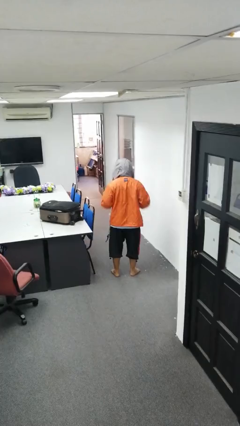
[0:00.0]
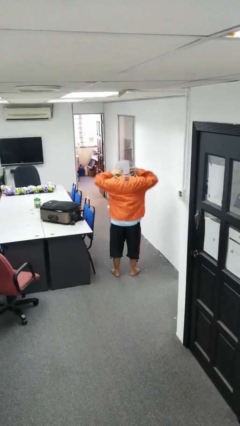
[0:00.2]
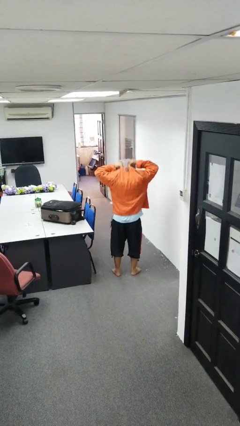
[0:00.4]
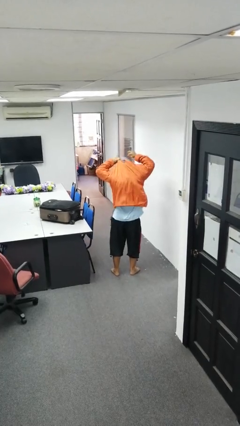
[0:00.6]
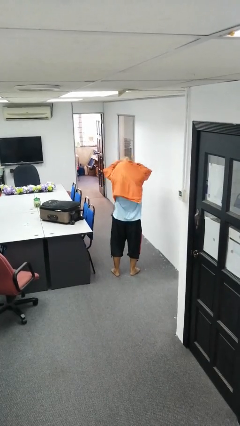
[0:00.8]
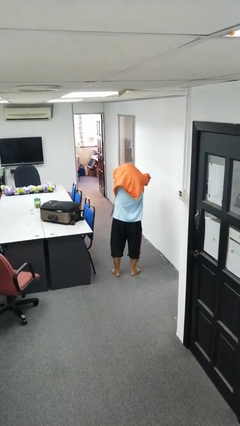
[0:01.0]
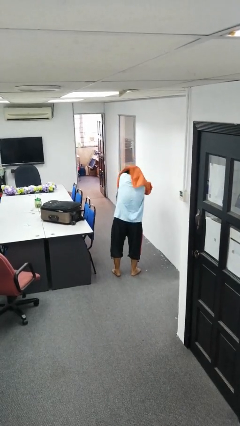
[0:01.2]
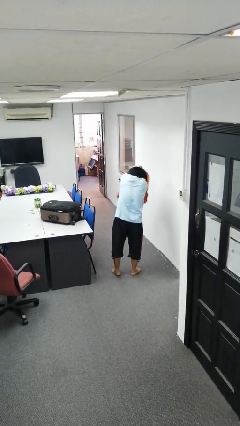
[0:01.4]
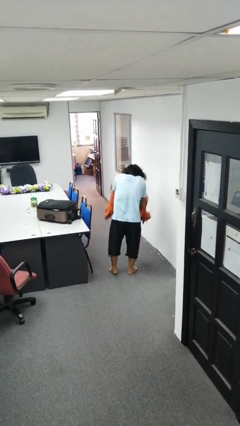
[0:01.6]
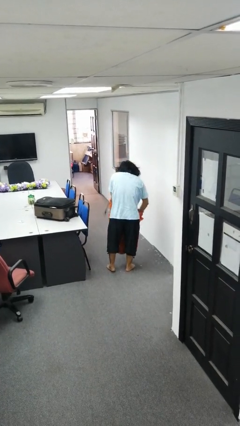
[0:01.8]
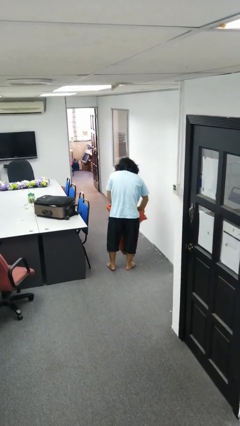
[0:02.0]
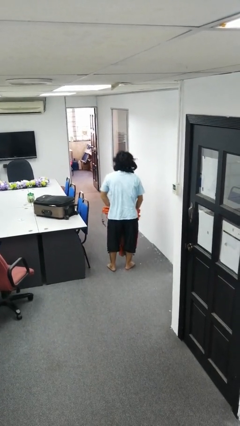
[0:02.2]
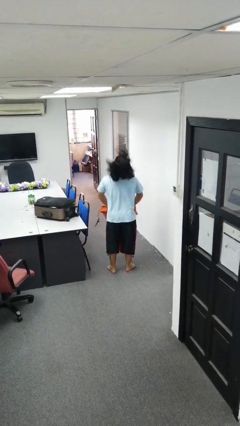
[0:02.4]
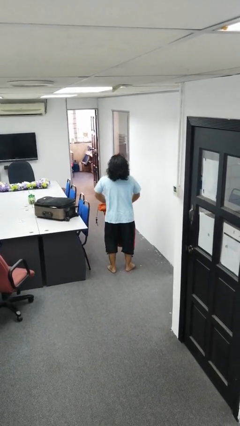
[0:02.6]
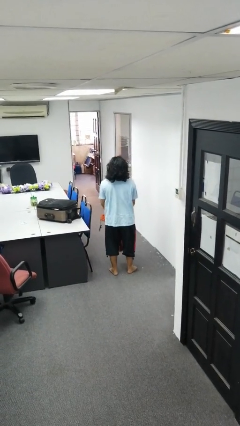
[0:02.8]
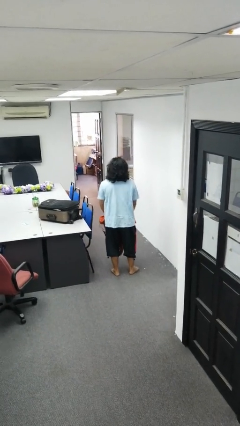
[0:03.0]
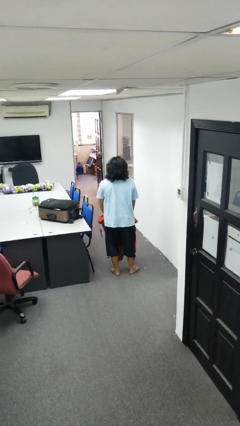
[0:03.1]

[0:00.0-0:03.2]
person takes off hoodie

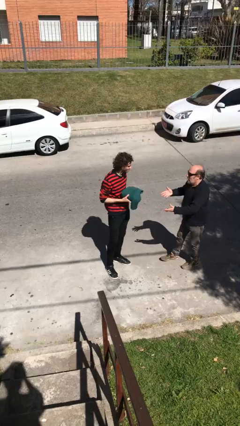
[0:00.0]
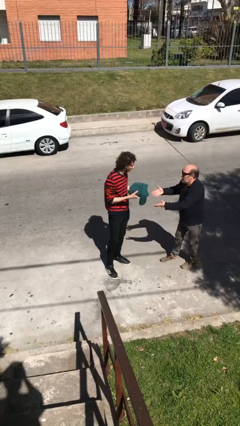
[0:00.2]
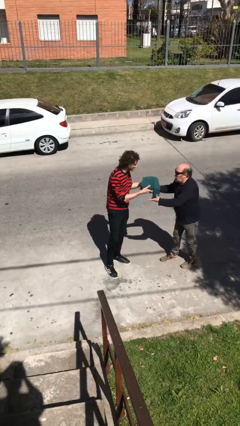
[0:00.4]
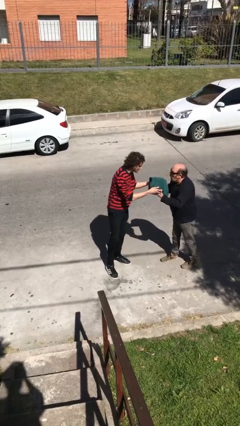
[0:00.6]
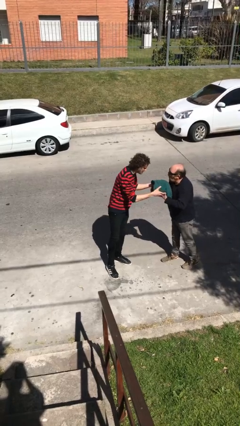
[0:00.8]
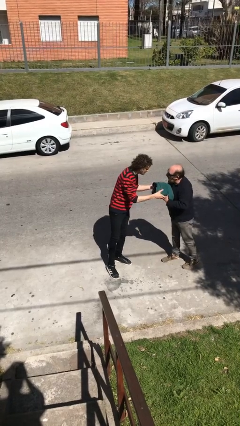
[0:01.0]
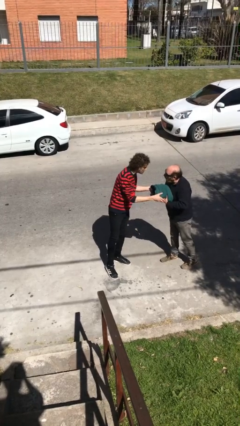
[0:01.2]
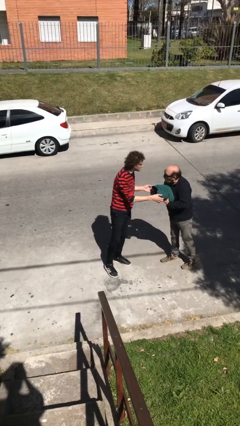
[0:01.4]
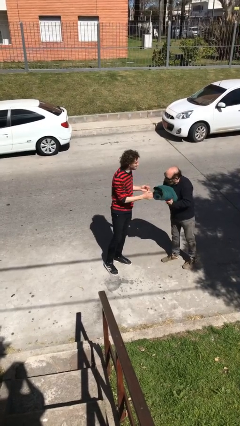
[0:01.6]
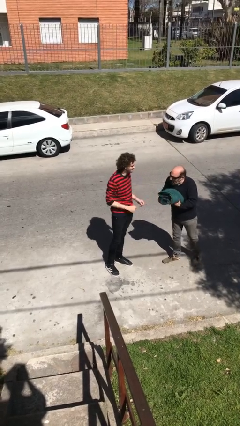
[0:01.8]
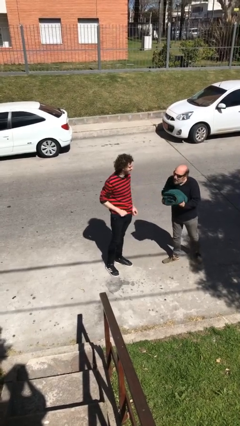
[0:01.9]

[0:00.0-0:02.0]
person transfers object to person

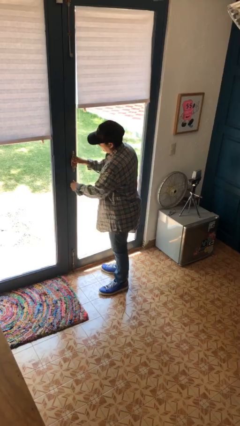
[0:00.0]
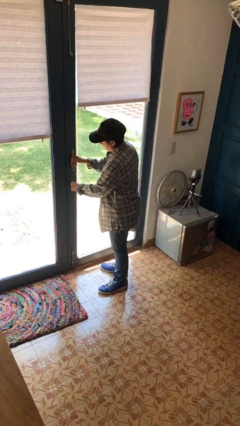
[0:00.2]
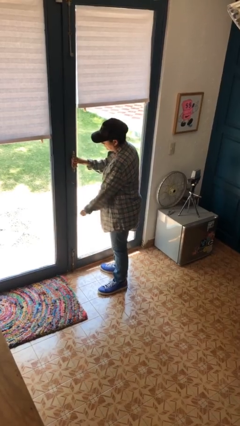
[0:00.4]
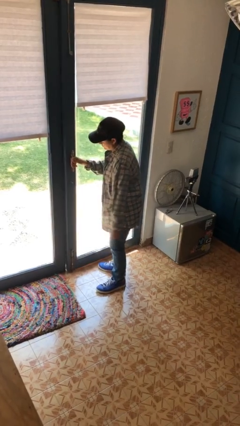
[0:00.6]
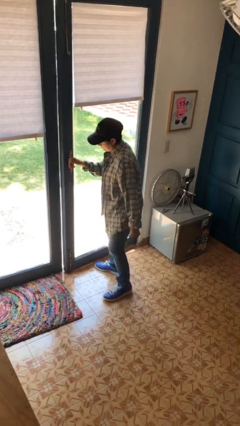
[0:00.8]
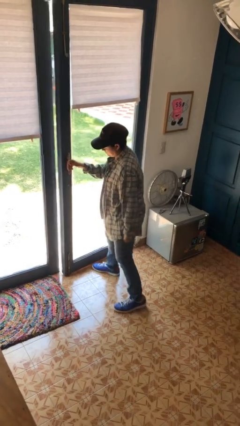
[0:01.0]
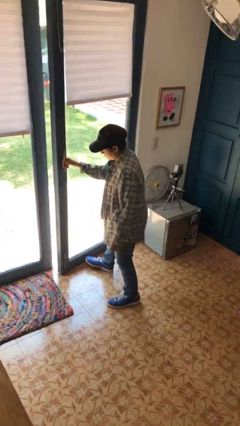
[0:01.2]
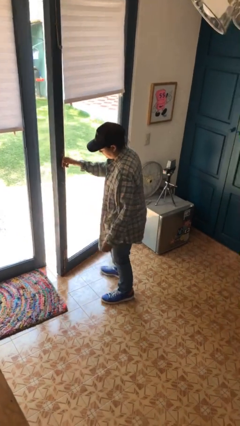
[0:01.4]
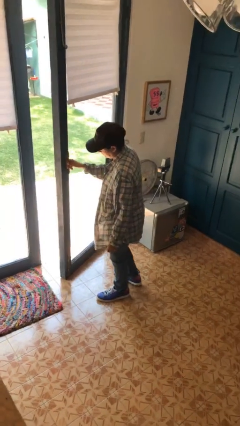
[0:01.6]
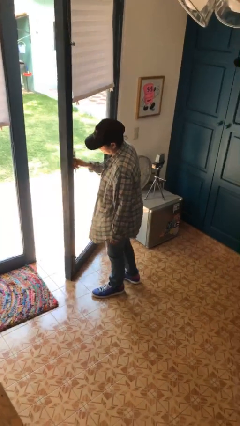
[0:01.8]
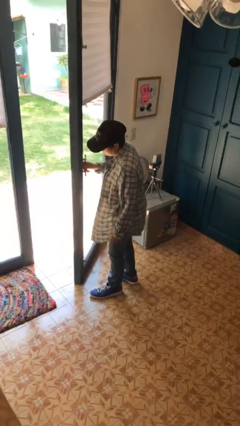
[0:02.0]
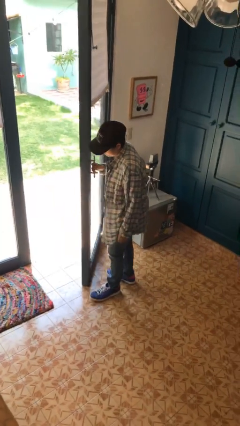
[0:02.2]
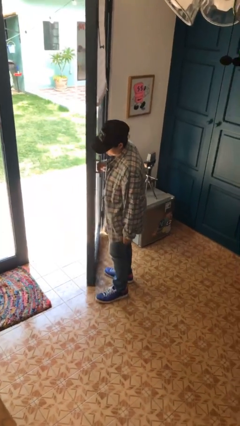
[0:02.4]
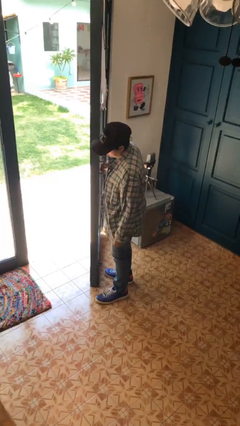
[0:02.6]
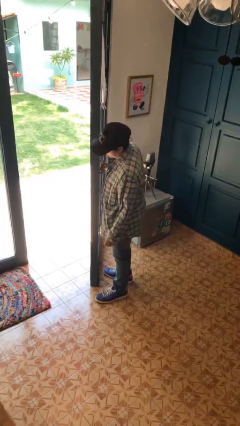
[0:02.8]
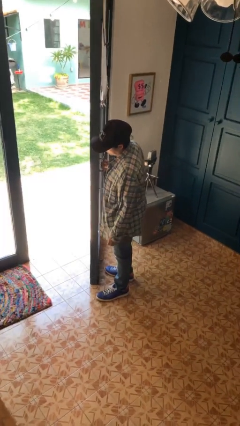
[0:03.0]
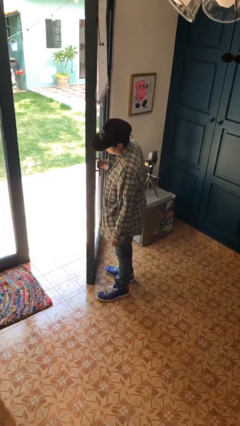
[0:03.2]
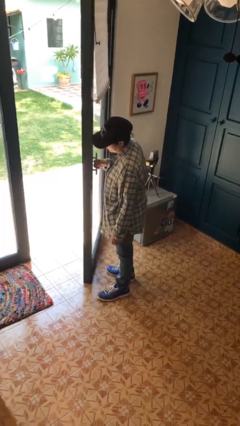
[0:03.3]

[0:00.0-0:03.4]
person opens facility door

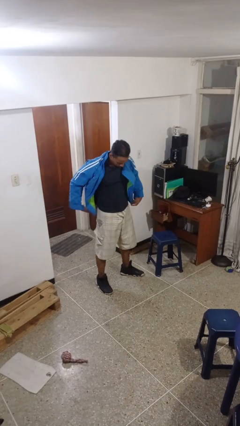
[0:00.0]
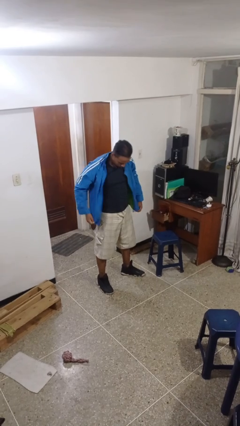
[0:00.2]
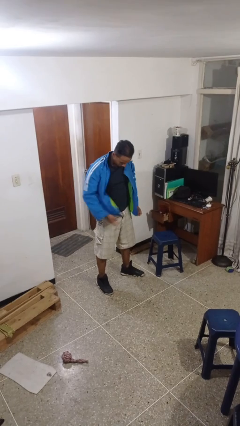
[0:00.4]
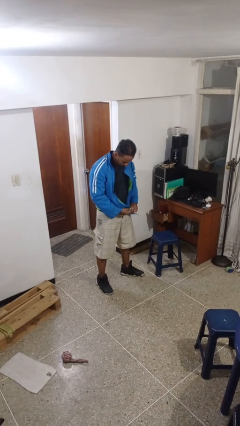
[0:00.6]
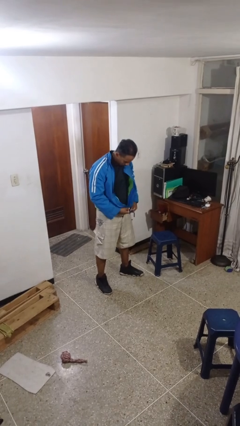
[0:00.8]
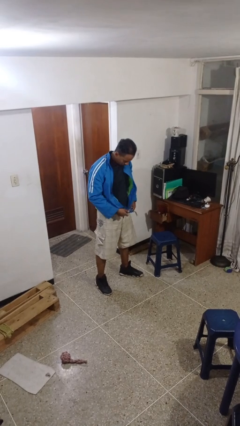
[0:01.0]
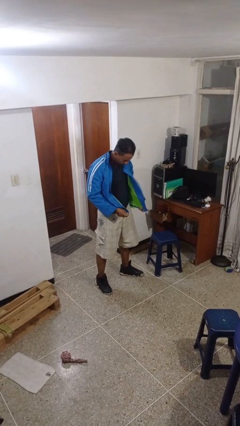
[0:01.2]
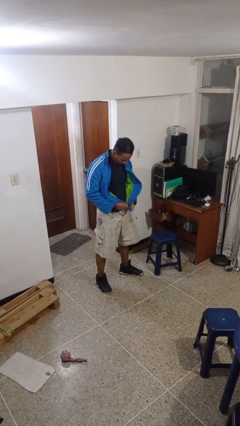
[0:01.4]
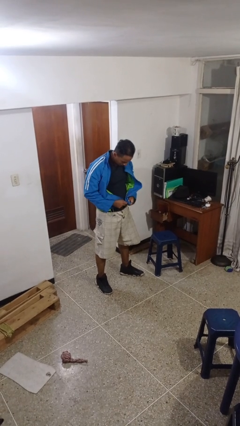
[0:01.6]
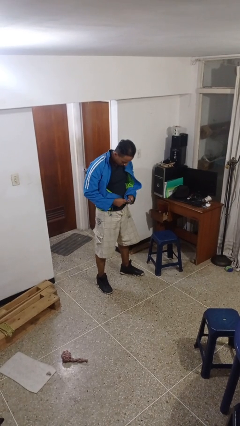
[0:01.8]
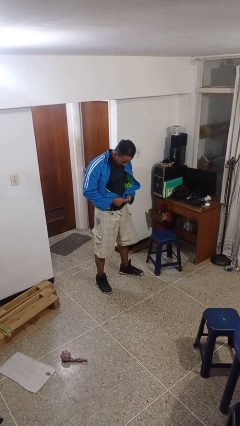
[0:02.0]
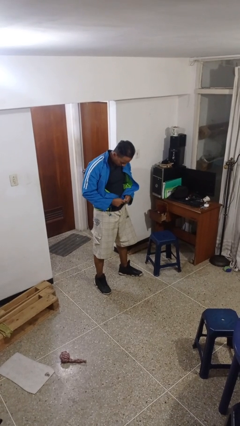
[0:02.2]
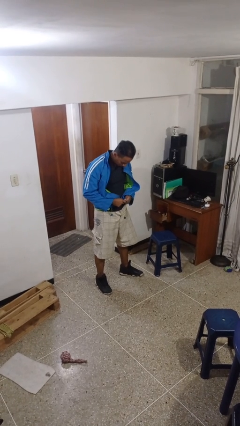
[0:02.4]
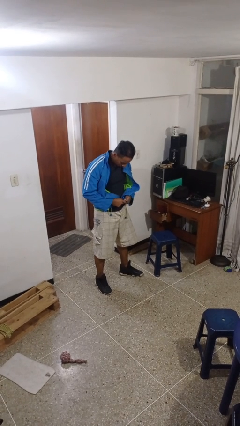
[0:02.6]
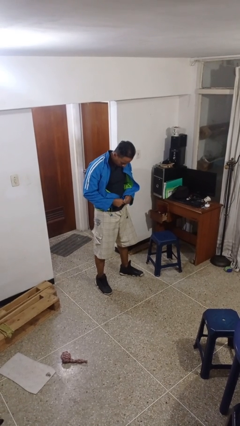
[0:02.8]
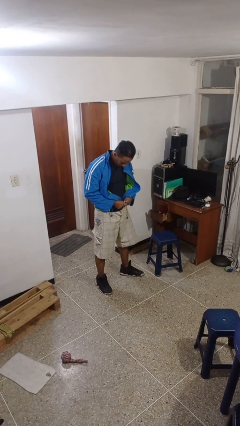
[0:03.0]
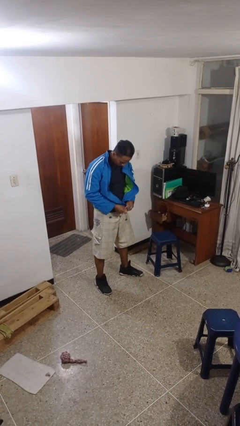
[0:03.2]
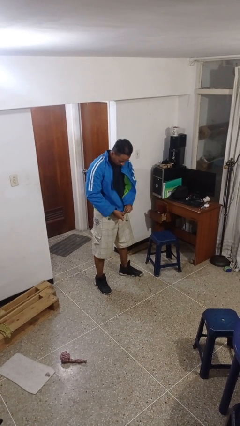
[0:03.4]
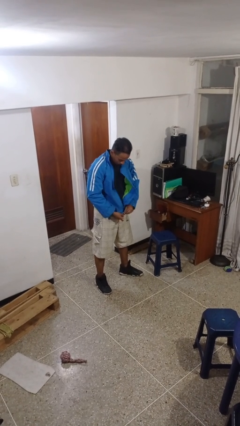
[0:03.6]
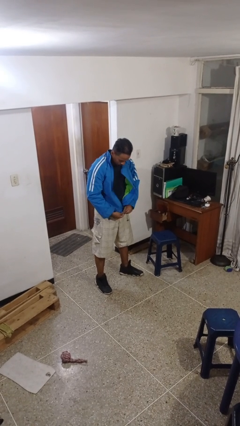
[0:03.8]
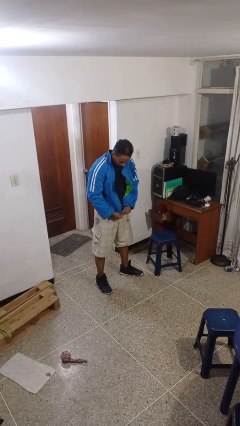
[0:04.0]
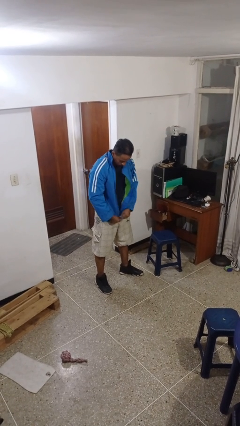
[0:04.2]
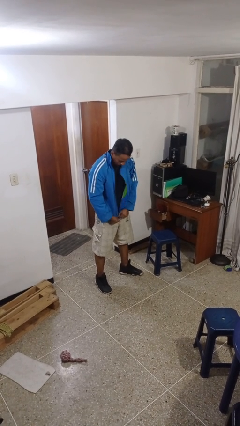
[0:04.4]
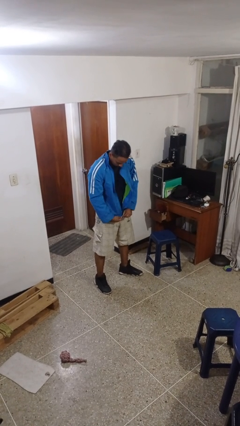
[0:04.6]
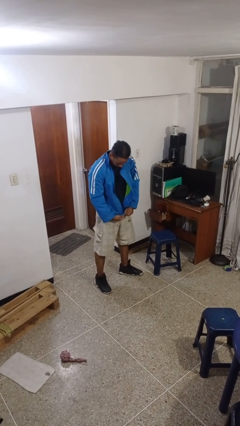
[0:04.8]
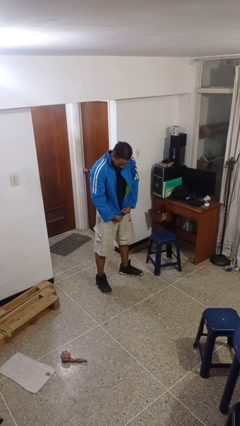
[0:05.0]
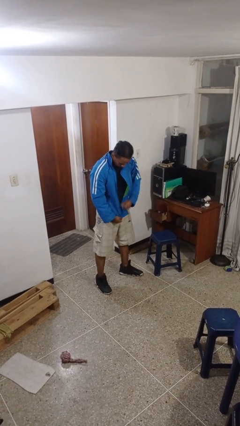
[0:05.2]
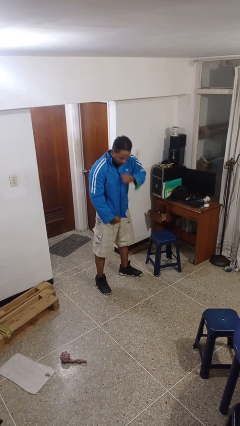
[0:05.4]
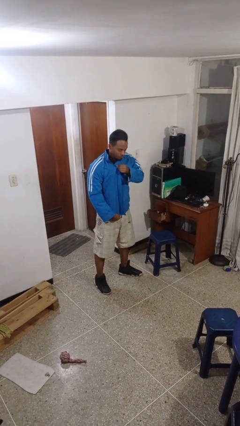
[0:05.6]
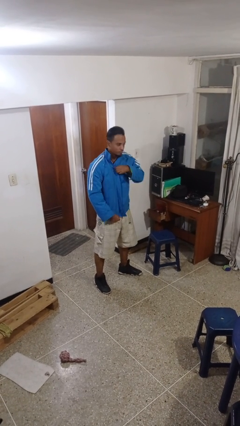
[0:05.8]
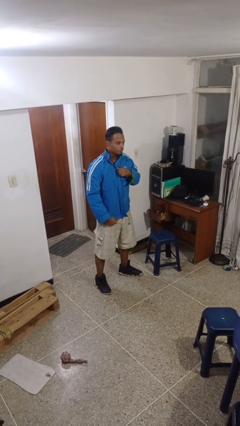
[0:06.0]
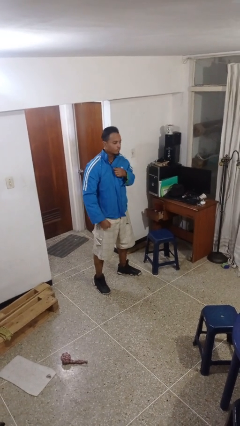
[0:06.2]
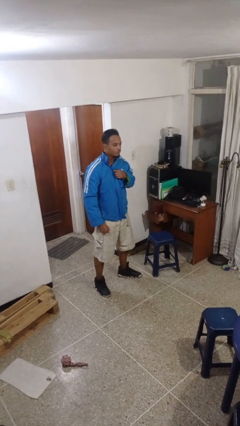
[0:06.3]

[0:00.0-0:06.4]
person zips up jacket

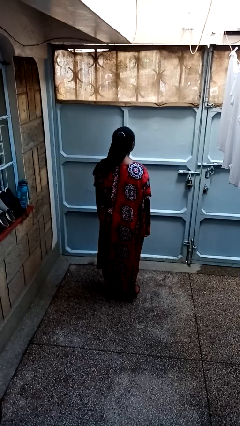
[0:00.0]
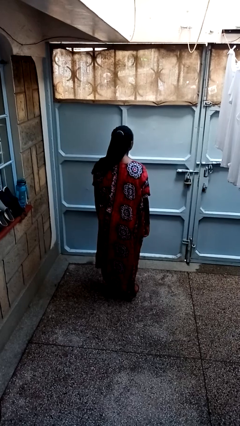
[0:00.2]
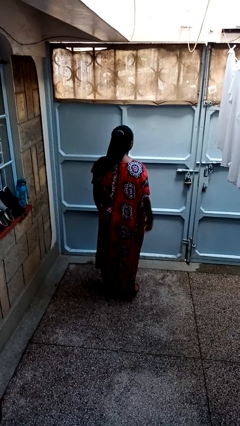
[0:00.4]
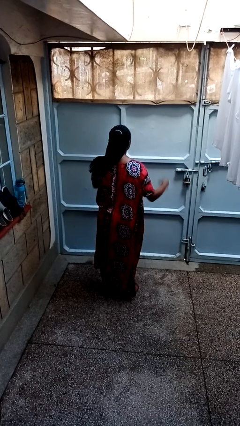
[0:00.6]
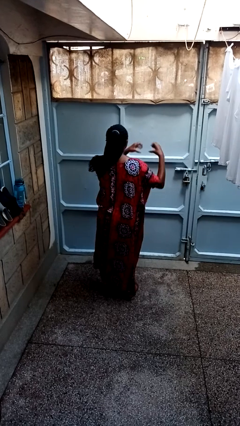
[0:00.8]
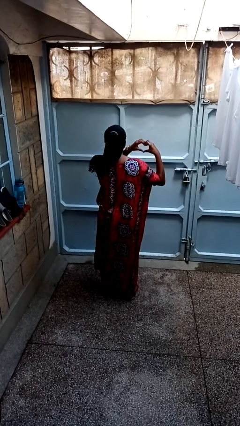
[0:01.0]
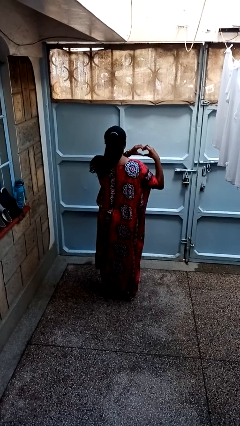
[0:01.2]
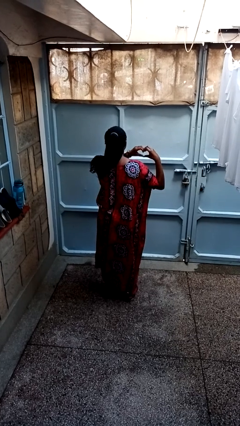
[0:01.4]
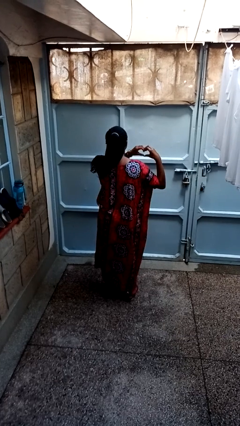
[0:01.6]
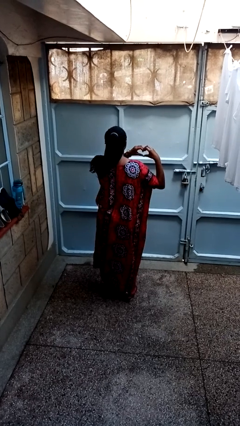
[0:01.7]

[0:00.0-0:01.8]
person gestures heart

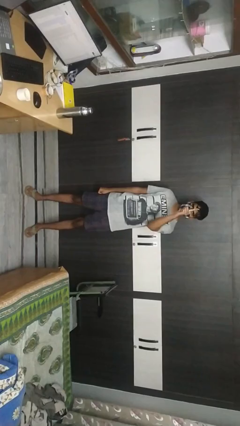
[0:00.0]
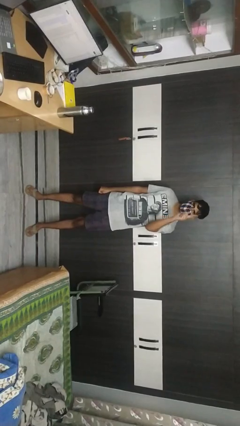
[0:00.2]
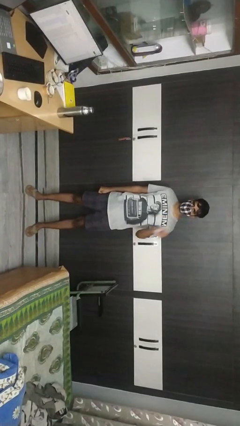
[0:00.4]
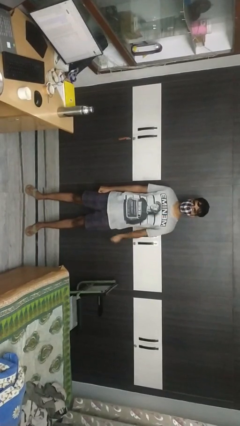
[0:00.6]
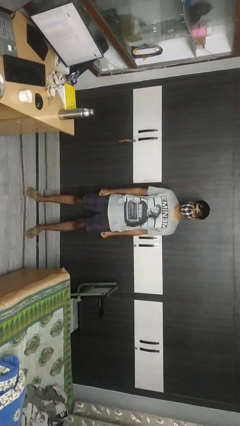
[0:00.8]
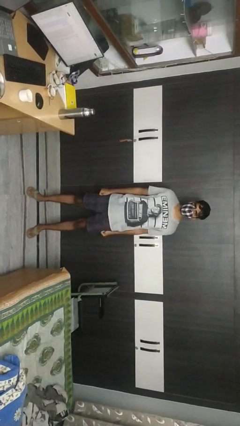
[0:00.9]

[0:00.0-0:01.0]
person gestures number one
